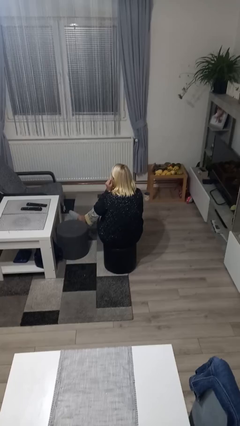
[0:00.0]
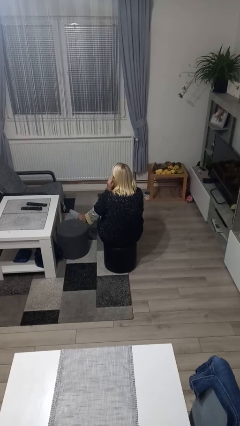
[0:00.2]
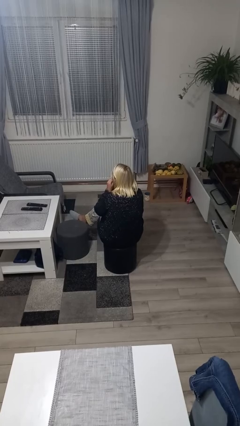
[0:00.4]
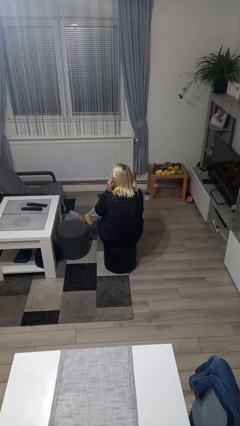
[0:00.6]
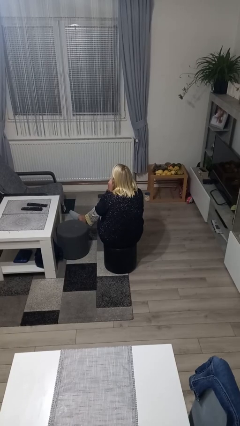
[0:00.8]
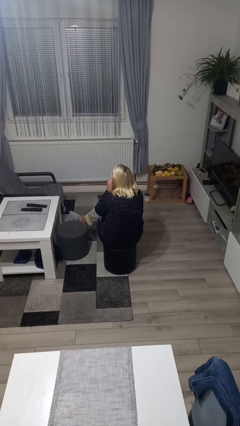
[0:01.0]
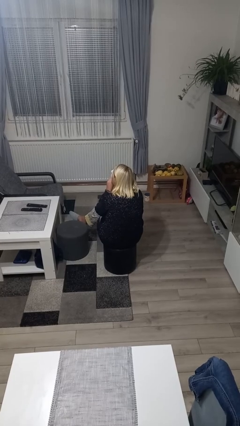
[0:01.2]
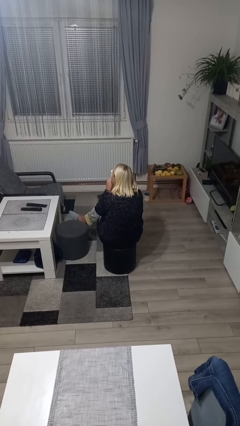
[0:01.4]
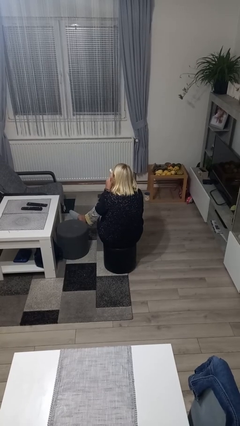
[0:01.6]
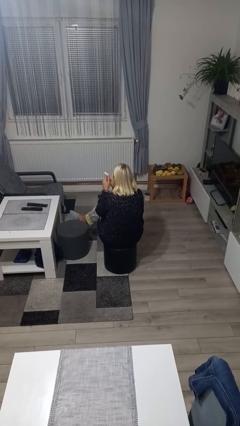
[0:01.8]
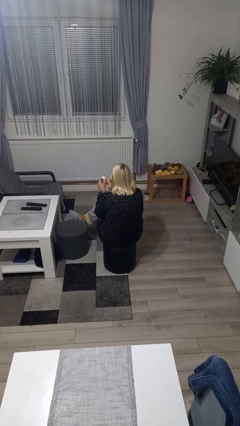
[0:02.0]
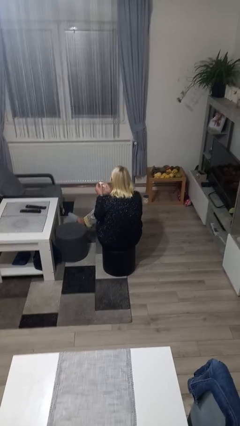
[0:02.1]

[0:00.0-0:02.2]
person blows nose

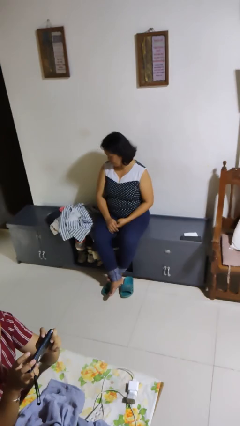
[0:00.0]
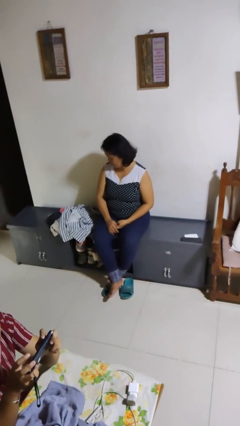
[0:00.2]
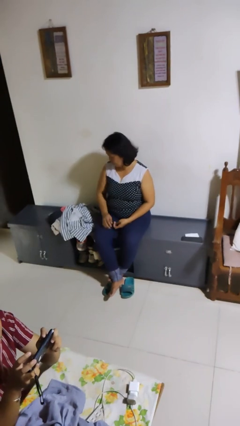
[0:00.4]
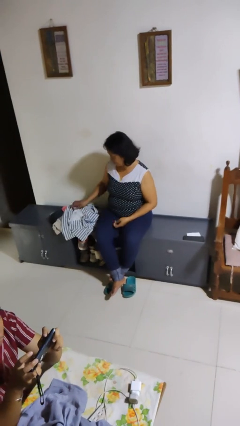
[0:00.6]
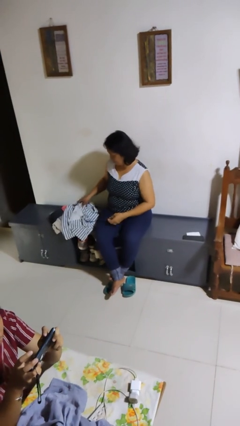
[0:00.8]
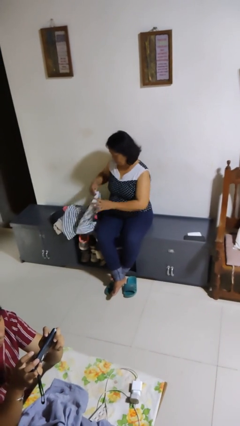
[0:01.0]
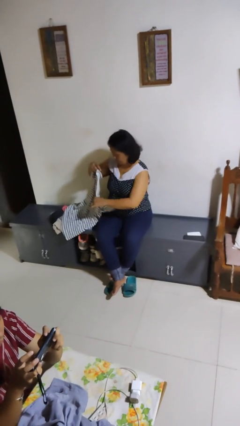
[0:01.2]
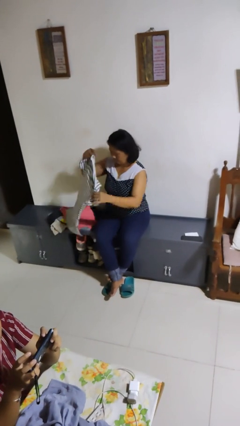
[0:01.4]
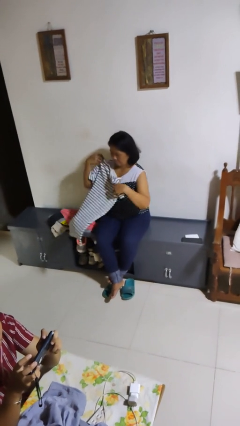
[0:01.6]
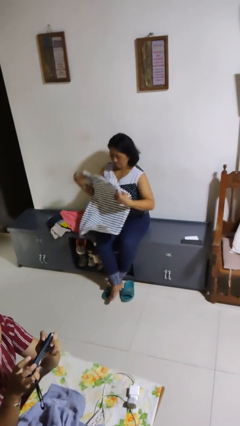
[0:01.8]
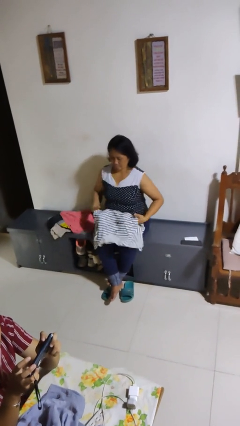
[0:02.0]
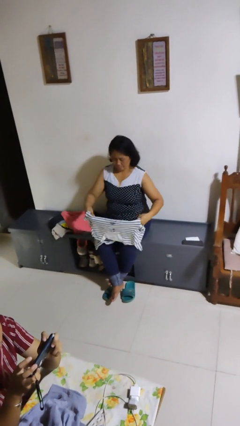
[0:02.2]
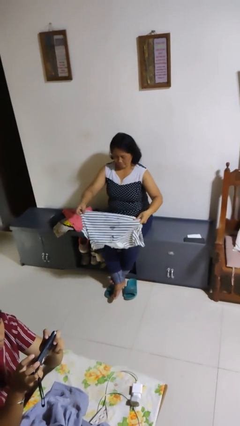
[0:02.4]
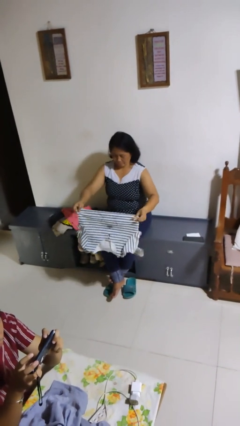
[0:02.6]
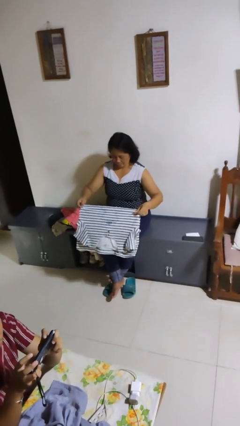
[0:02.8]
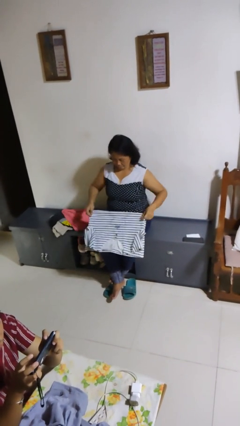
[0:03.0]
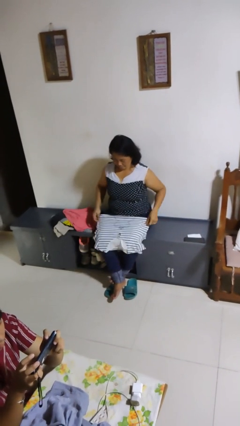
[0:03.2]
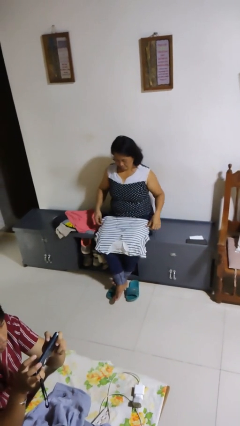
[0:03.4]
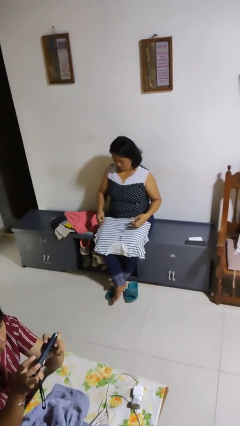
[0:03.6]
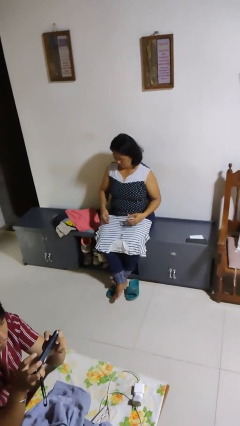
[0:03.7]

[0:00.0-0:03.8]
person folds shirt

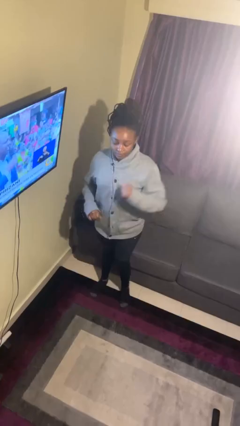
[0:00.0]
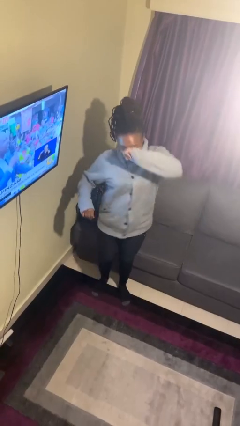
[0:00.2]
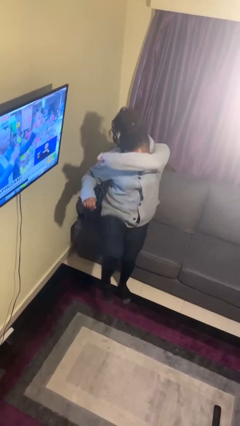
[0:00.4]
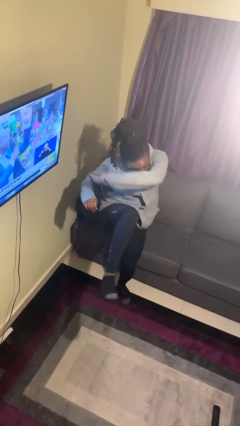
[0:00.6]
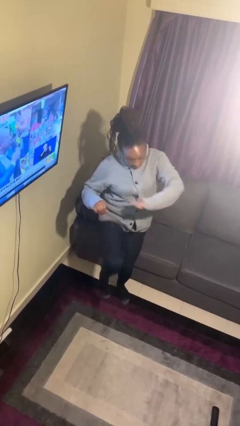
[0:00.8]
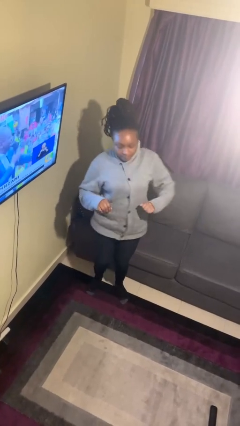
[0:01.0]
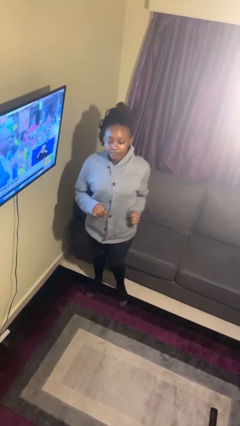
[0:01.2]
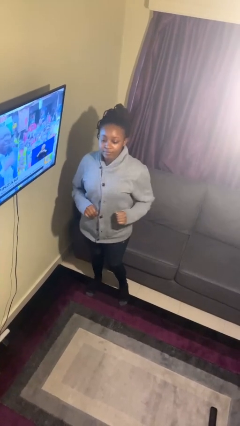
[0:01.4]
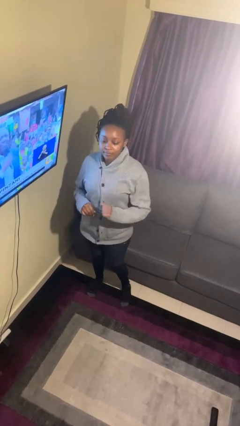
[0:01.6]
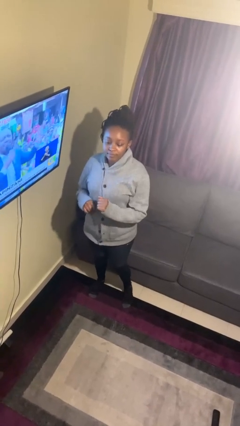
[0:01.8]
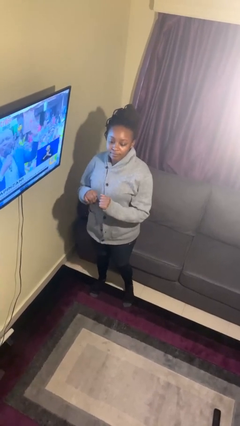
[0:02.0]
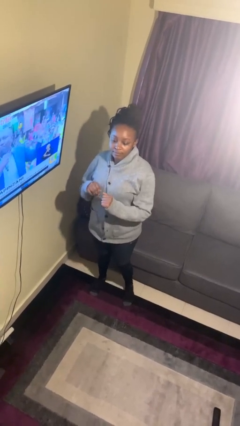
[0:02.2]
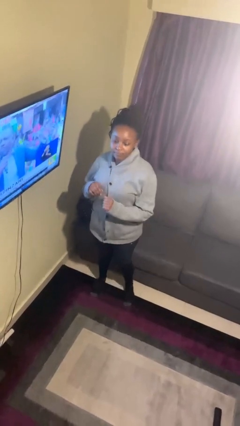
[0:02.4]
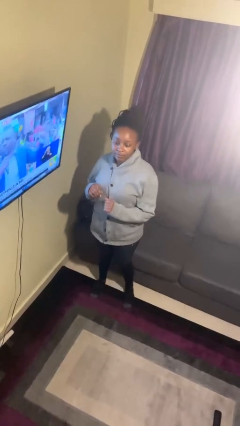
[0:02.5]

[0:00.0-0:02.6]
person karate kicks

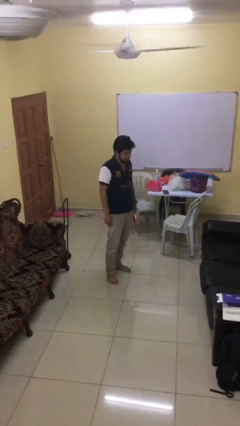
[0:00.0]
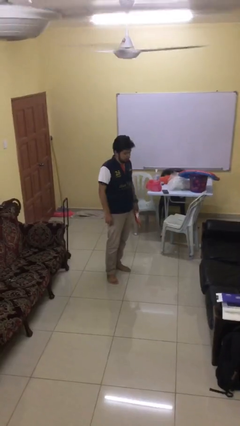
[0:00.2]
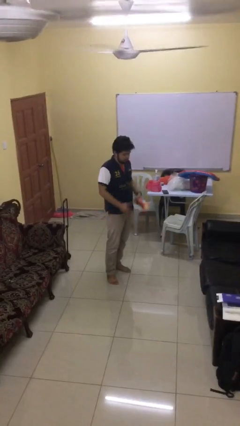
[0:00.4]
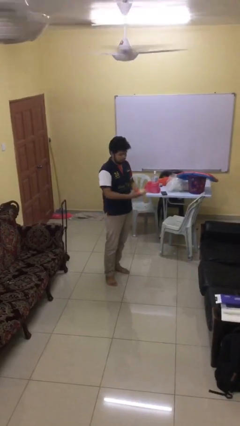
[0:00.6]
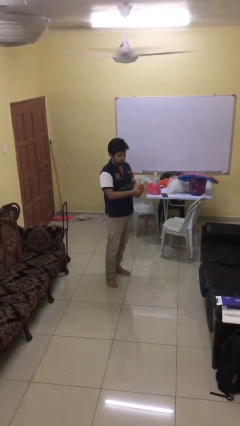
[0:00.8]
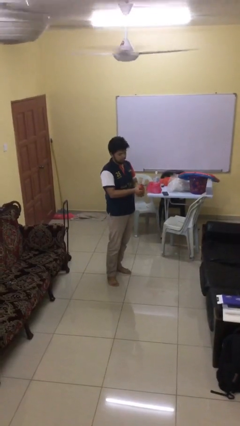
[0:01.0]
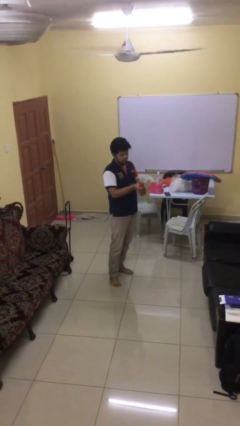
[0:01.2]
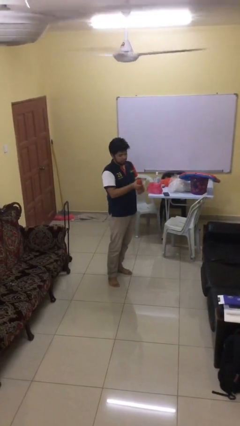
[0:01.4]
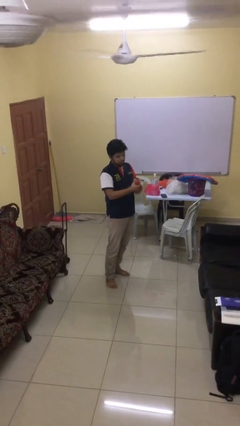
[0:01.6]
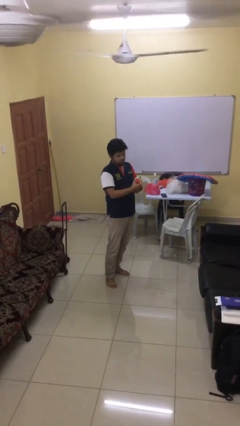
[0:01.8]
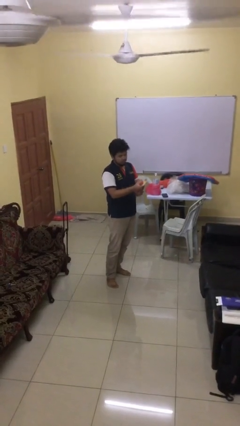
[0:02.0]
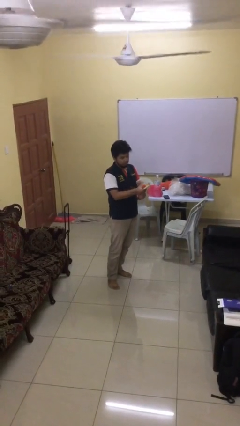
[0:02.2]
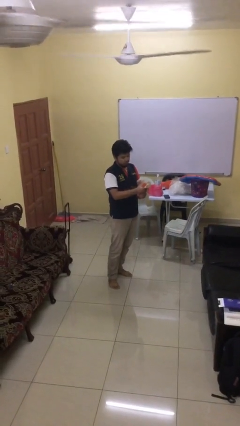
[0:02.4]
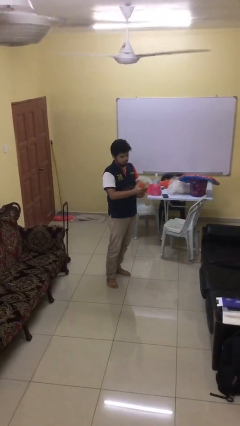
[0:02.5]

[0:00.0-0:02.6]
person squeezes object

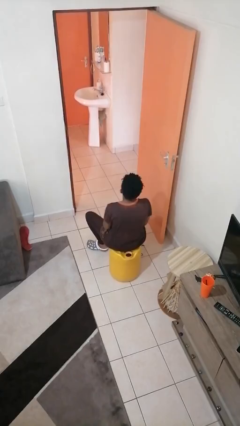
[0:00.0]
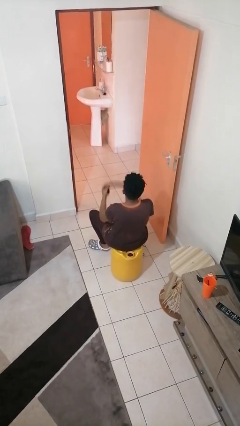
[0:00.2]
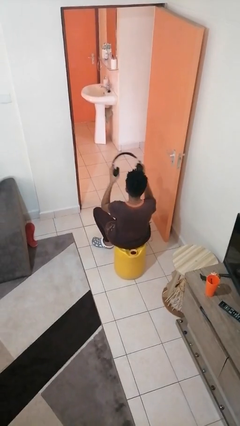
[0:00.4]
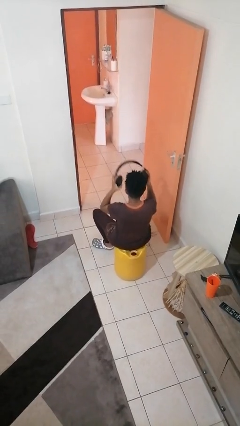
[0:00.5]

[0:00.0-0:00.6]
person takes off headphones

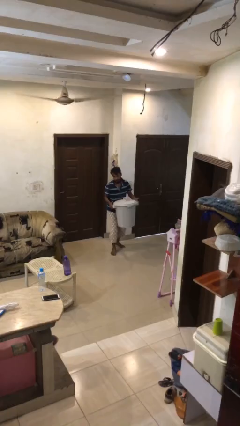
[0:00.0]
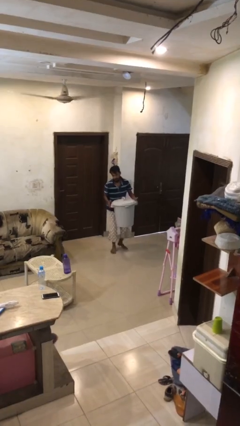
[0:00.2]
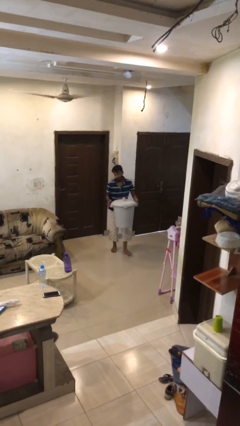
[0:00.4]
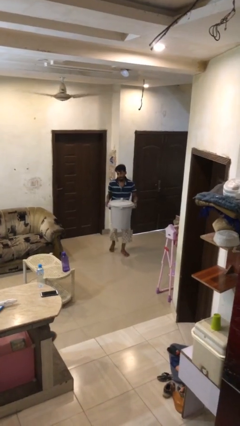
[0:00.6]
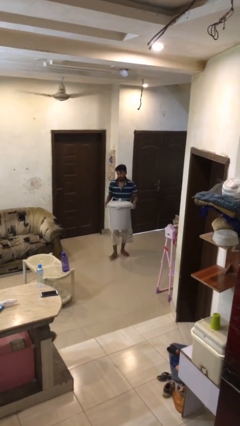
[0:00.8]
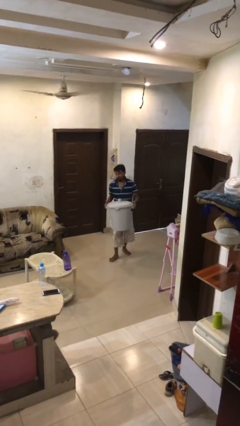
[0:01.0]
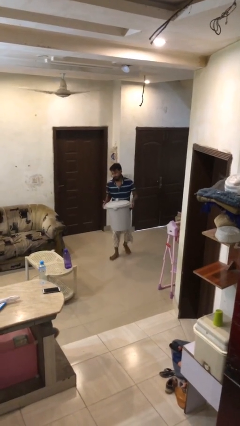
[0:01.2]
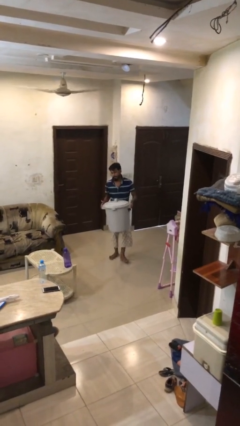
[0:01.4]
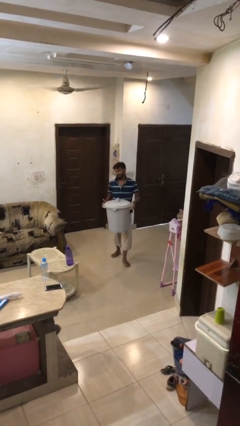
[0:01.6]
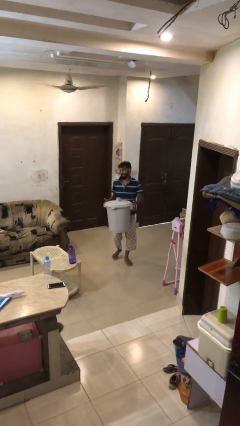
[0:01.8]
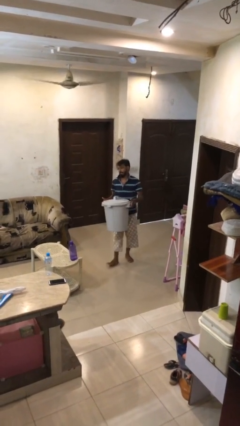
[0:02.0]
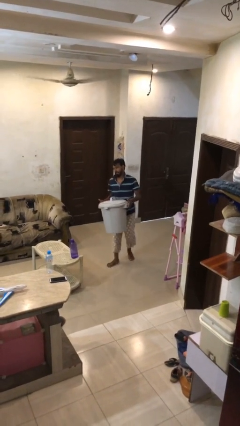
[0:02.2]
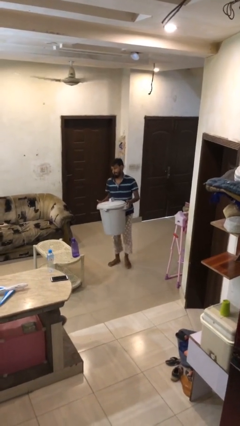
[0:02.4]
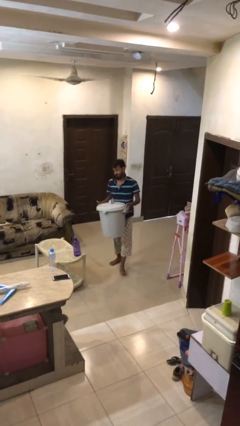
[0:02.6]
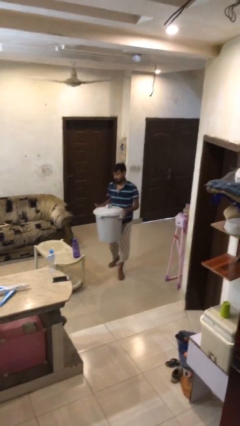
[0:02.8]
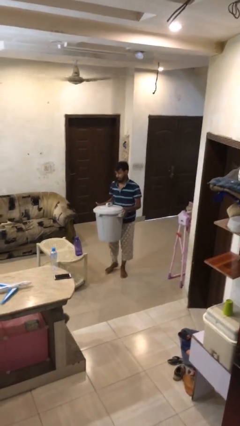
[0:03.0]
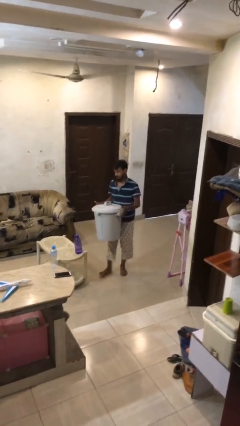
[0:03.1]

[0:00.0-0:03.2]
person carries heavy object

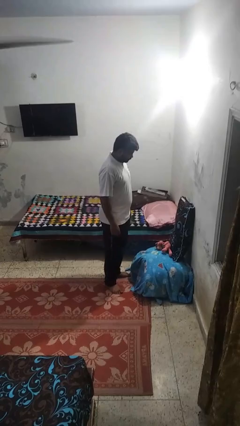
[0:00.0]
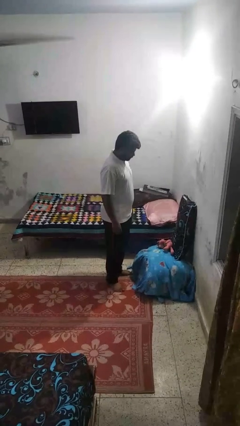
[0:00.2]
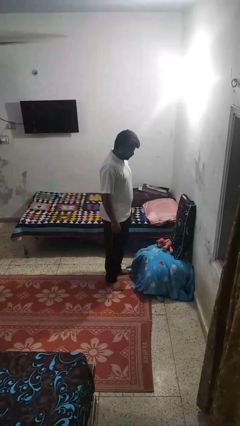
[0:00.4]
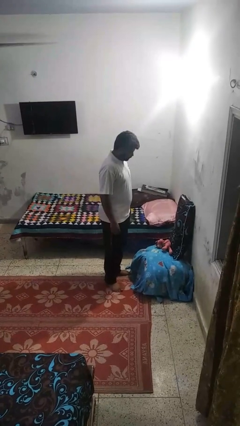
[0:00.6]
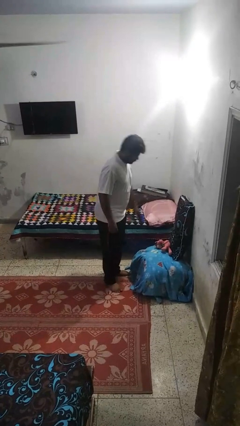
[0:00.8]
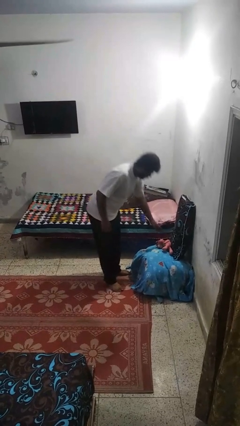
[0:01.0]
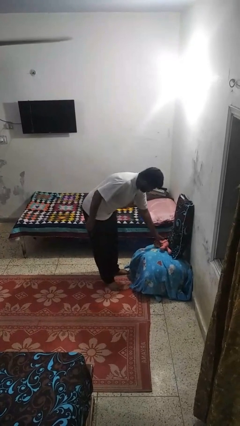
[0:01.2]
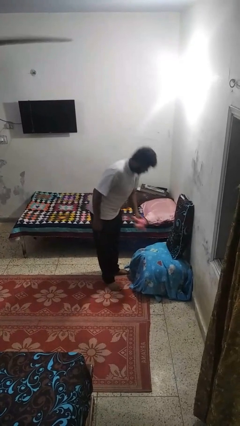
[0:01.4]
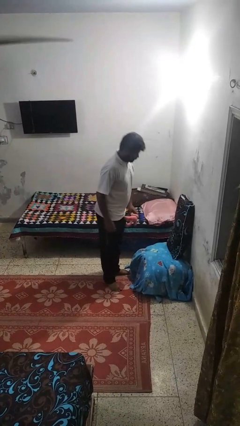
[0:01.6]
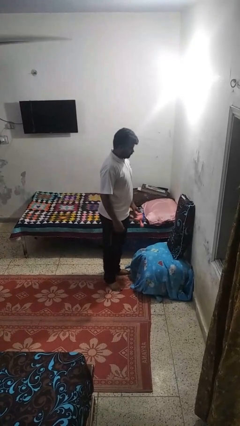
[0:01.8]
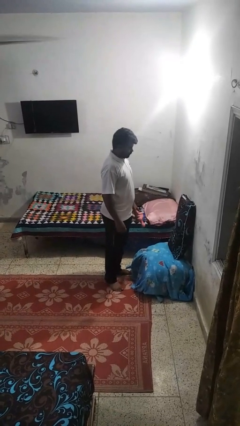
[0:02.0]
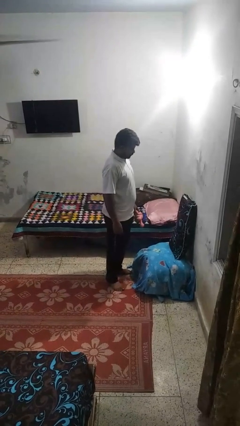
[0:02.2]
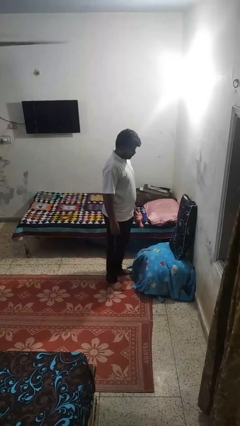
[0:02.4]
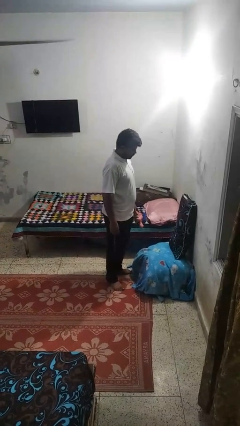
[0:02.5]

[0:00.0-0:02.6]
person picks up object from couch
